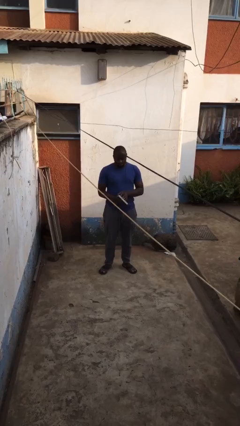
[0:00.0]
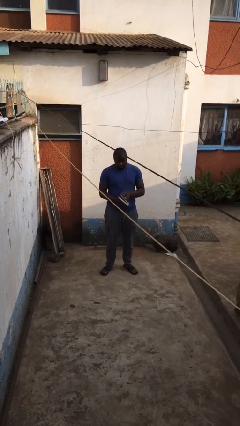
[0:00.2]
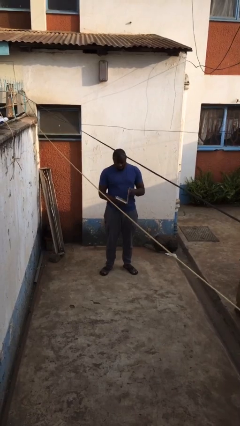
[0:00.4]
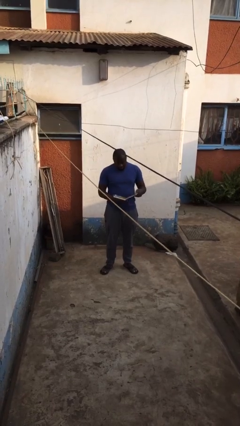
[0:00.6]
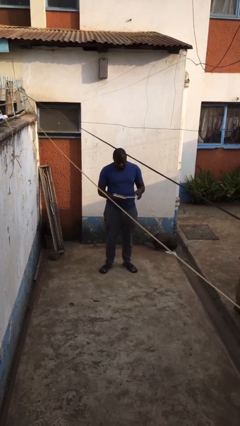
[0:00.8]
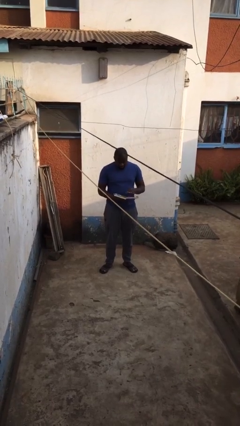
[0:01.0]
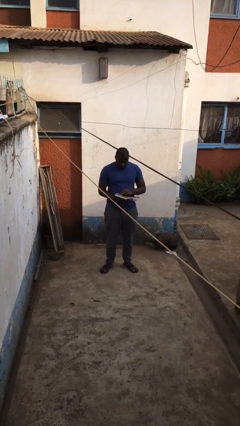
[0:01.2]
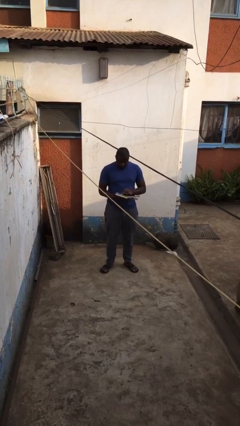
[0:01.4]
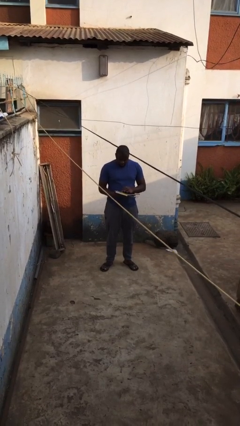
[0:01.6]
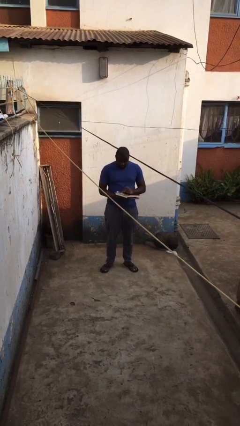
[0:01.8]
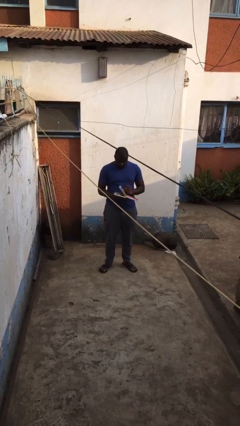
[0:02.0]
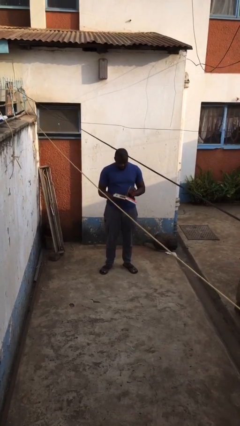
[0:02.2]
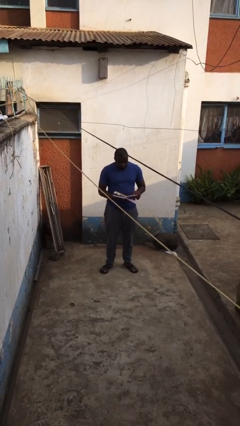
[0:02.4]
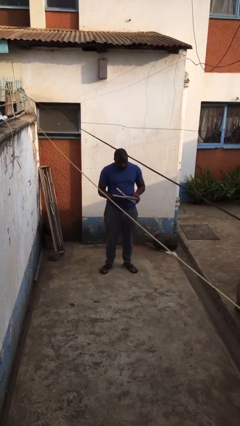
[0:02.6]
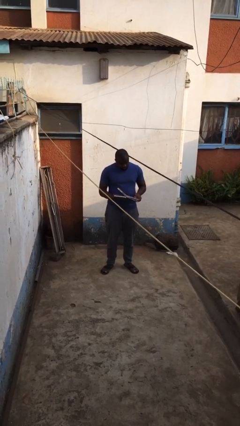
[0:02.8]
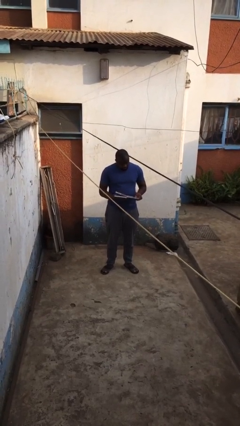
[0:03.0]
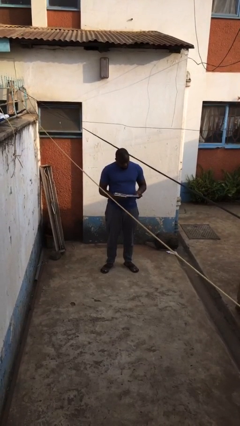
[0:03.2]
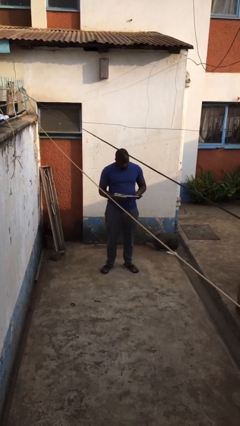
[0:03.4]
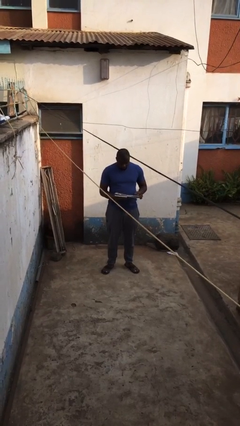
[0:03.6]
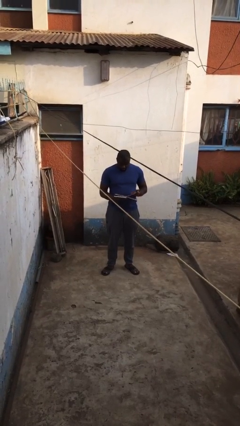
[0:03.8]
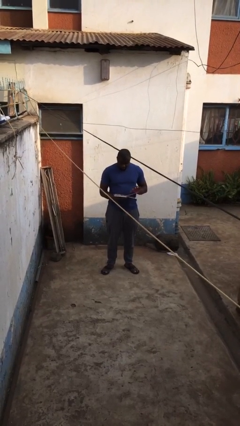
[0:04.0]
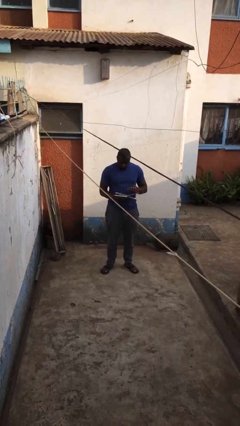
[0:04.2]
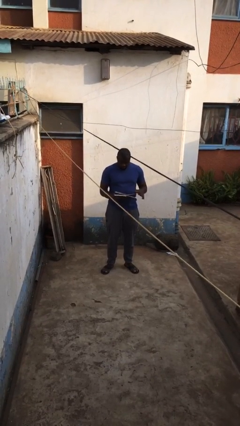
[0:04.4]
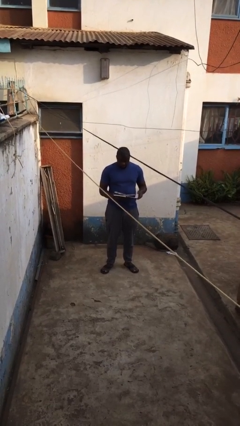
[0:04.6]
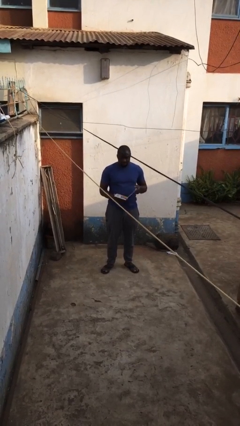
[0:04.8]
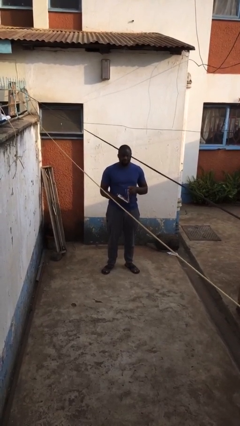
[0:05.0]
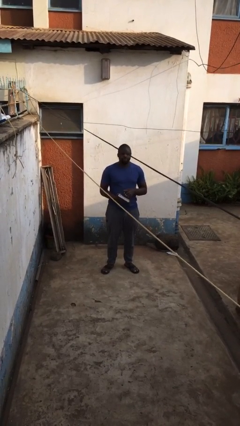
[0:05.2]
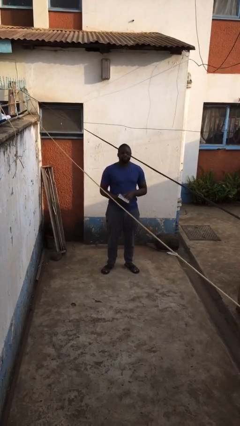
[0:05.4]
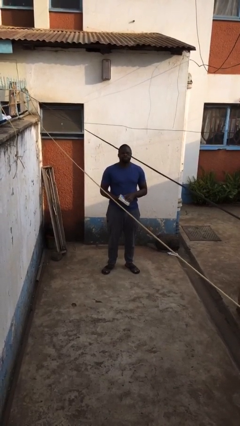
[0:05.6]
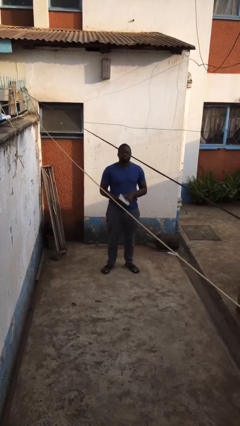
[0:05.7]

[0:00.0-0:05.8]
person reads book

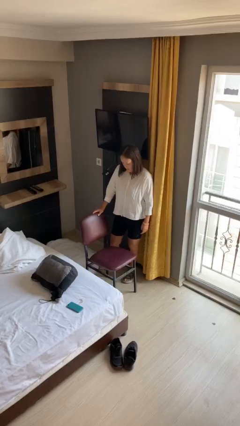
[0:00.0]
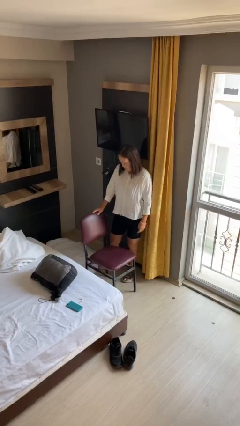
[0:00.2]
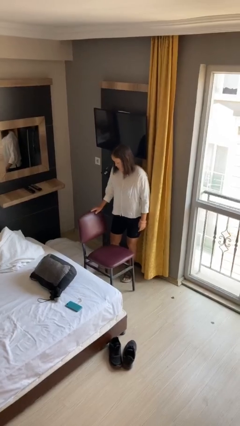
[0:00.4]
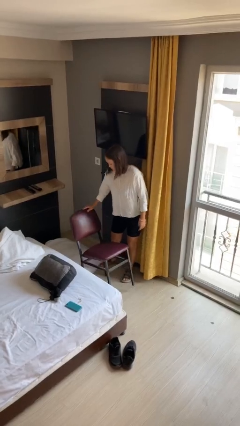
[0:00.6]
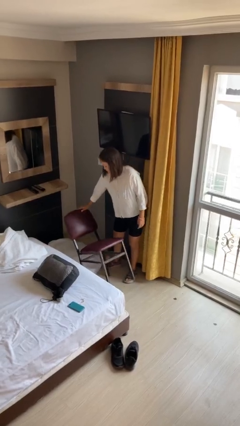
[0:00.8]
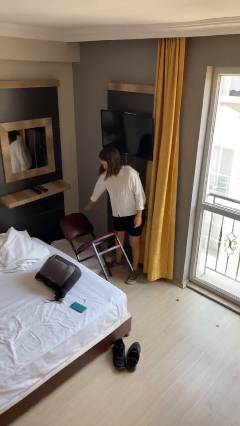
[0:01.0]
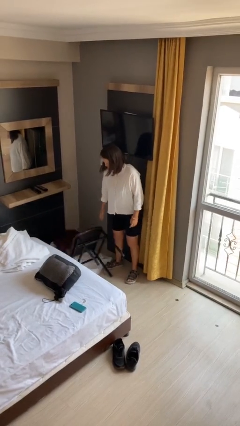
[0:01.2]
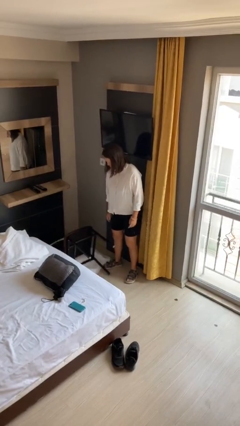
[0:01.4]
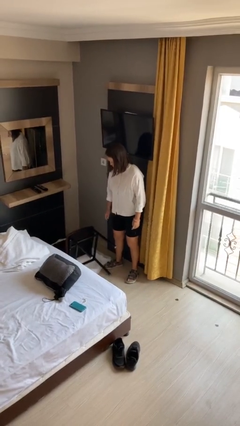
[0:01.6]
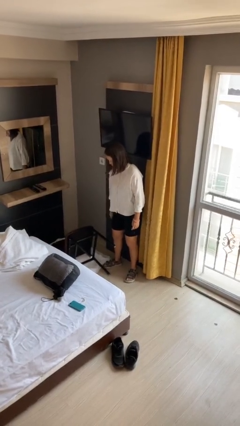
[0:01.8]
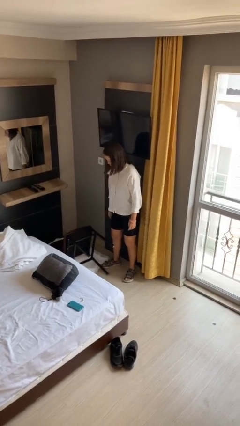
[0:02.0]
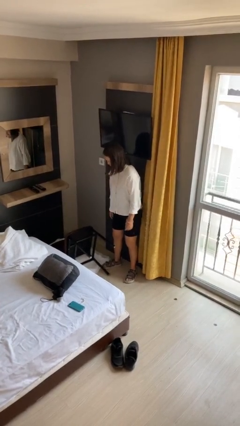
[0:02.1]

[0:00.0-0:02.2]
person knocks over furniture

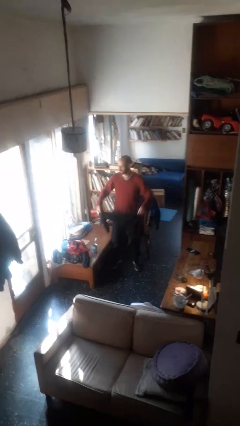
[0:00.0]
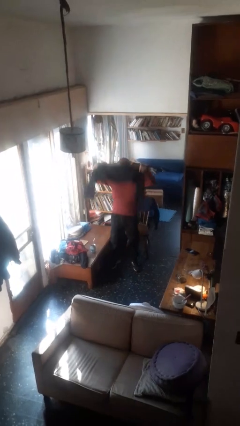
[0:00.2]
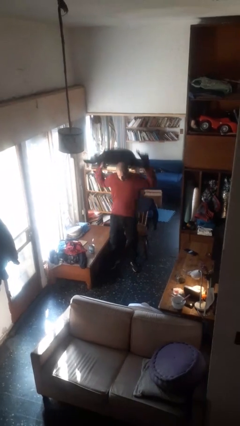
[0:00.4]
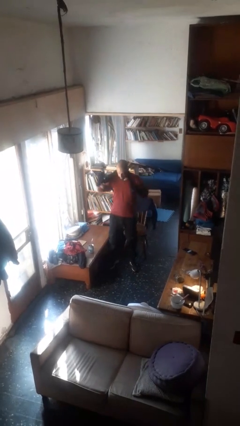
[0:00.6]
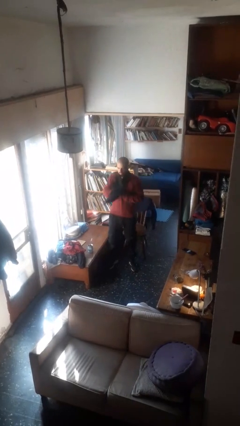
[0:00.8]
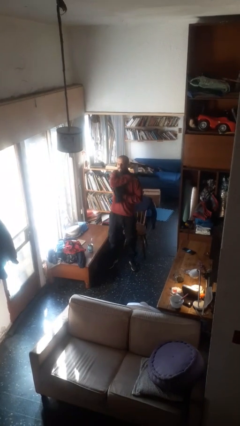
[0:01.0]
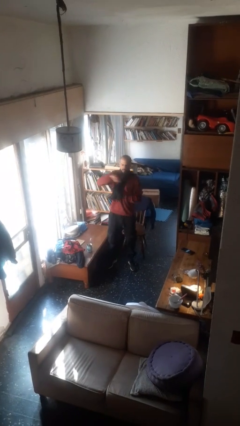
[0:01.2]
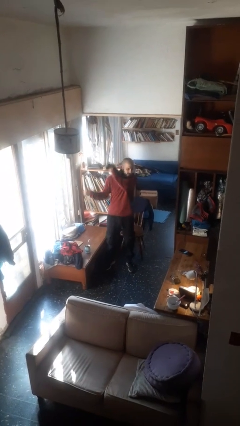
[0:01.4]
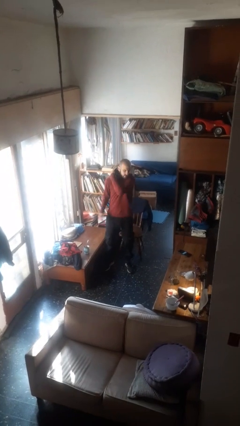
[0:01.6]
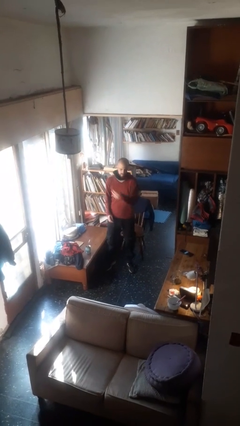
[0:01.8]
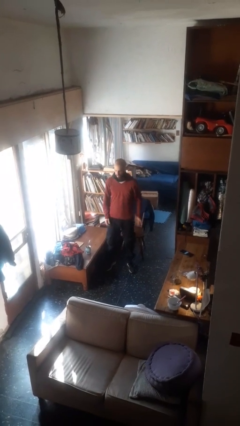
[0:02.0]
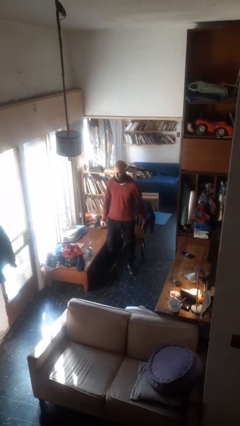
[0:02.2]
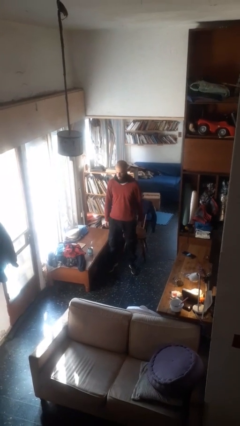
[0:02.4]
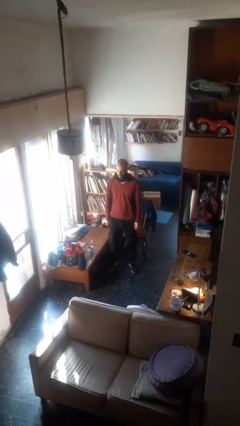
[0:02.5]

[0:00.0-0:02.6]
person puts on scarf

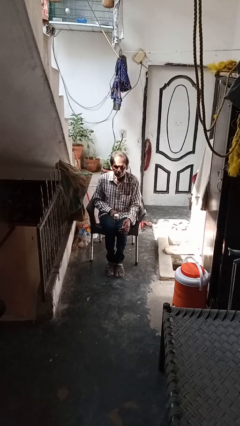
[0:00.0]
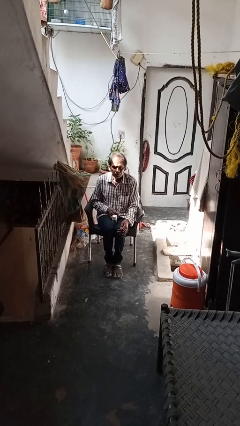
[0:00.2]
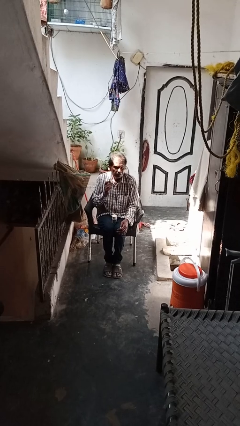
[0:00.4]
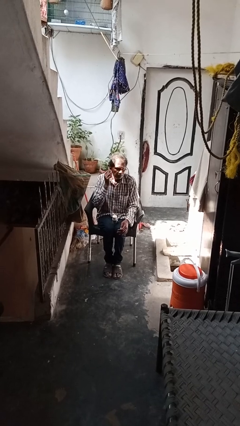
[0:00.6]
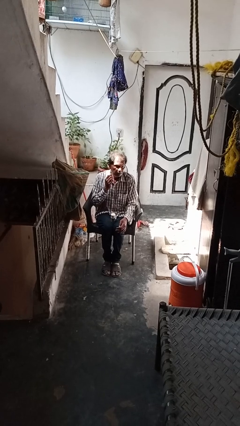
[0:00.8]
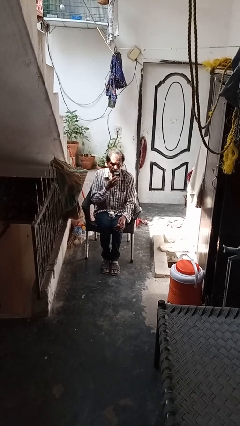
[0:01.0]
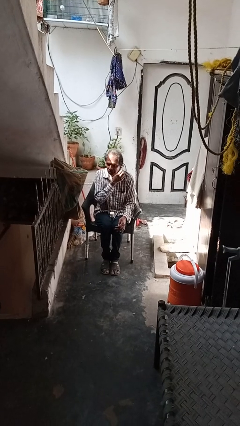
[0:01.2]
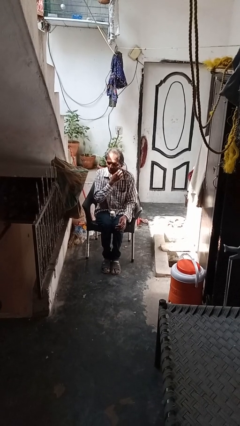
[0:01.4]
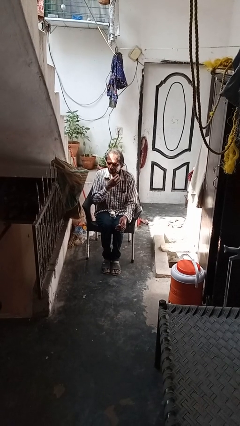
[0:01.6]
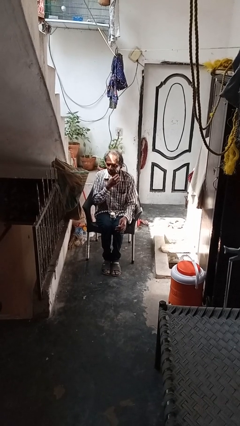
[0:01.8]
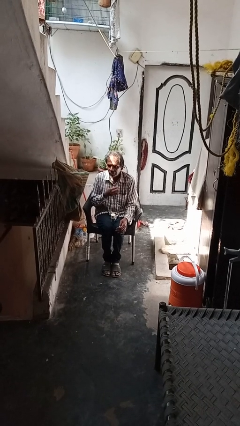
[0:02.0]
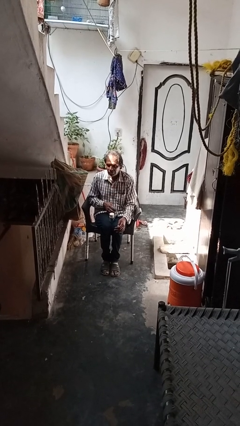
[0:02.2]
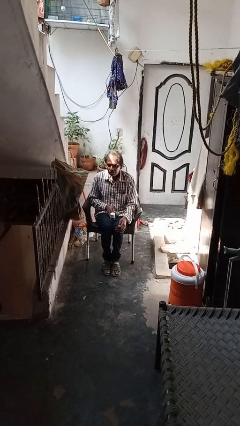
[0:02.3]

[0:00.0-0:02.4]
person shaves face

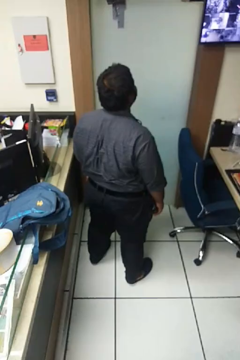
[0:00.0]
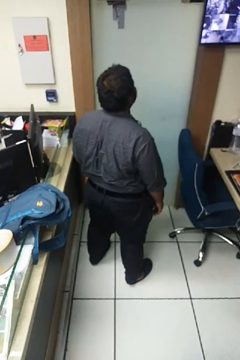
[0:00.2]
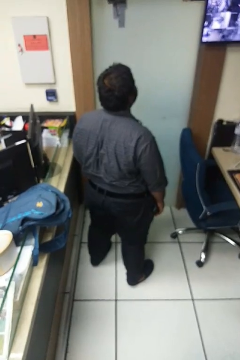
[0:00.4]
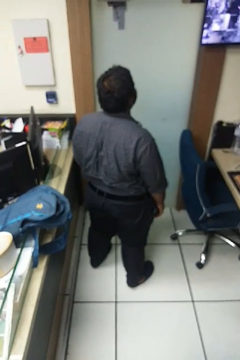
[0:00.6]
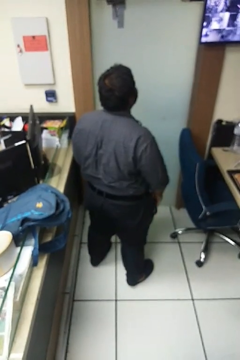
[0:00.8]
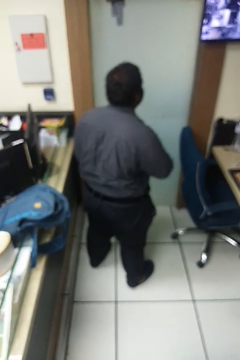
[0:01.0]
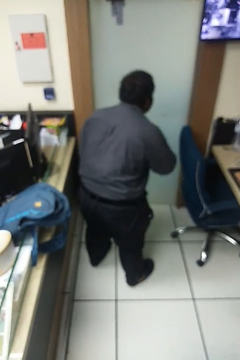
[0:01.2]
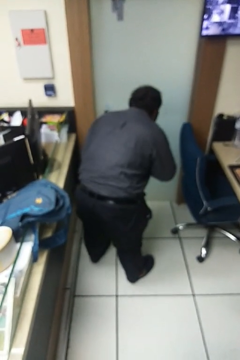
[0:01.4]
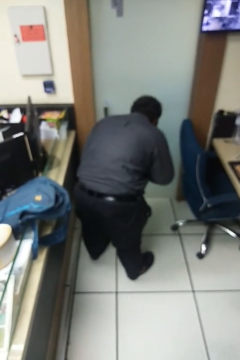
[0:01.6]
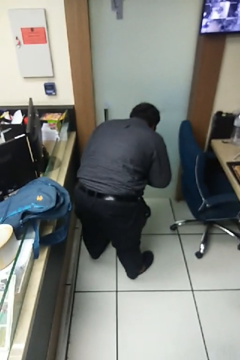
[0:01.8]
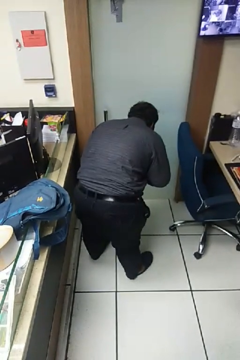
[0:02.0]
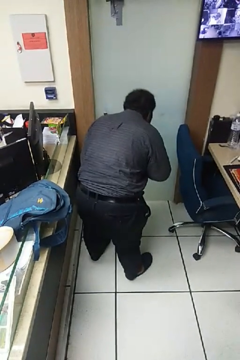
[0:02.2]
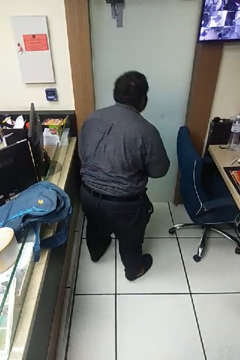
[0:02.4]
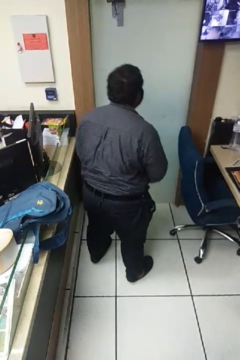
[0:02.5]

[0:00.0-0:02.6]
person bows

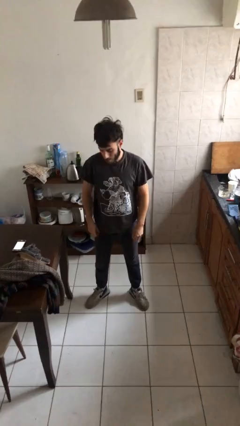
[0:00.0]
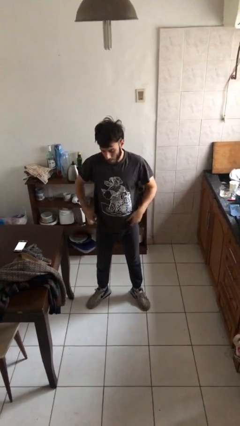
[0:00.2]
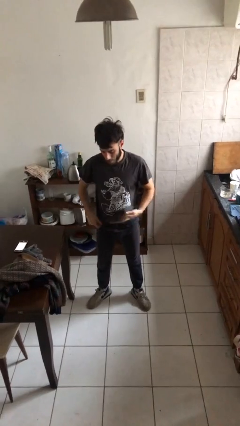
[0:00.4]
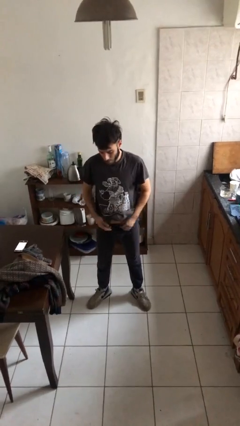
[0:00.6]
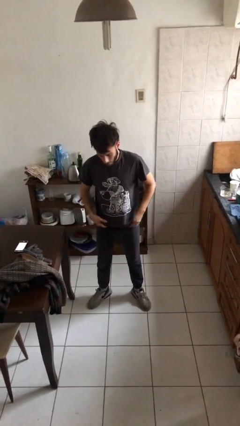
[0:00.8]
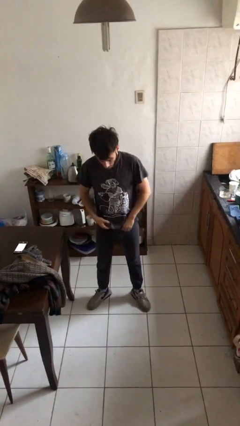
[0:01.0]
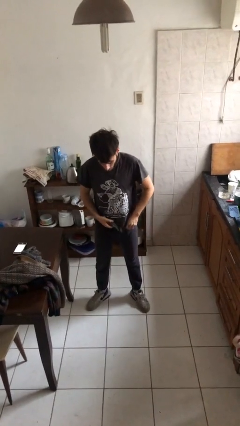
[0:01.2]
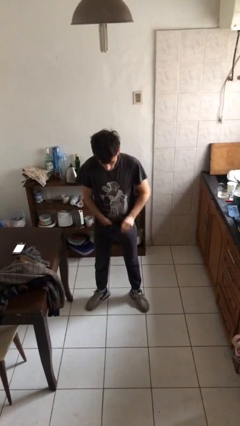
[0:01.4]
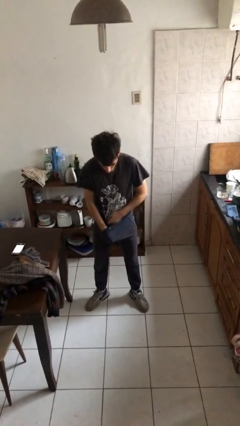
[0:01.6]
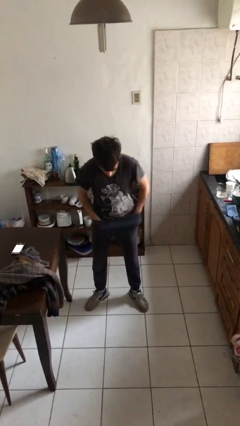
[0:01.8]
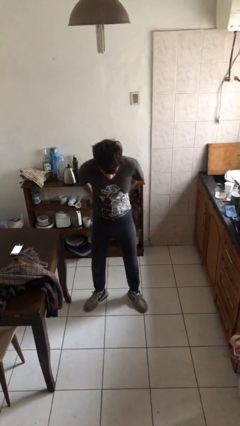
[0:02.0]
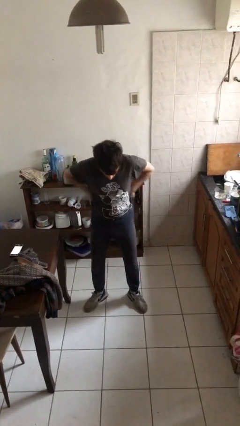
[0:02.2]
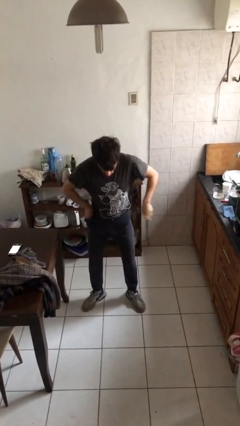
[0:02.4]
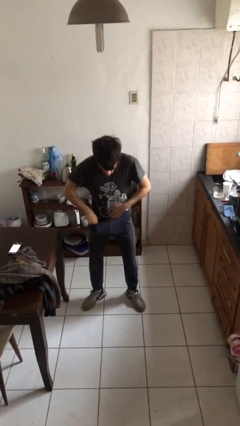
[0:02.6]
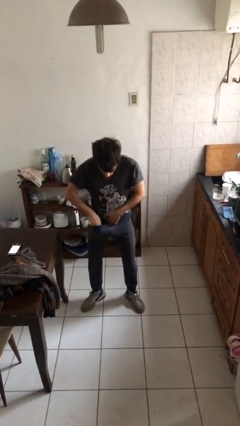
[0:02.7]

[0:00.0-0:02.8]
person tucks in shirt
